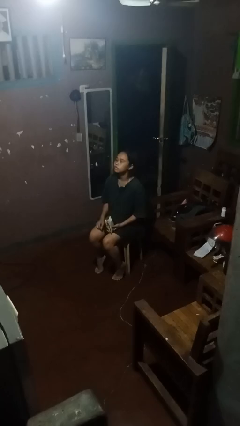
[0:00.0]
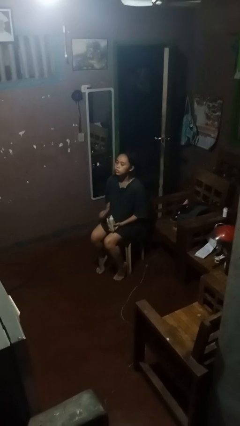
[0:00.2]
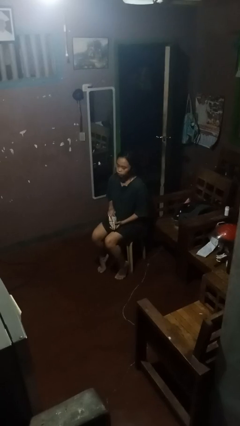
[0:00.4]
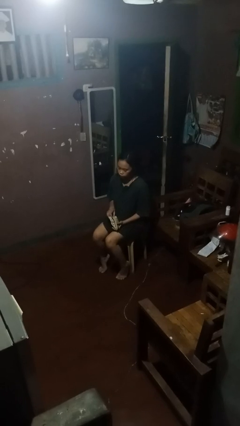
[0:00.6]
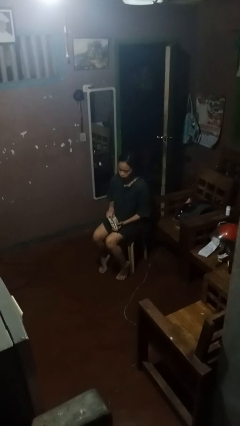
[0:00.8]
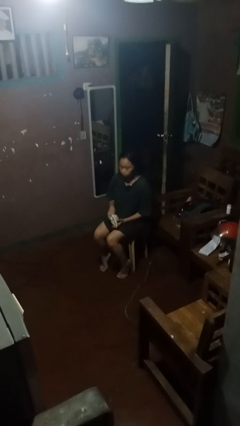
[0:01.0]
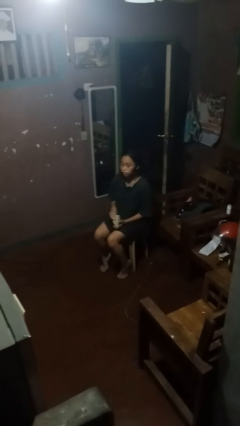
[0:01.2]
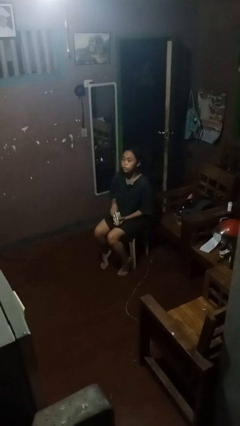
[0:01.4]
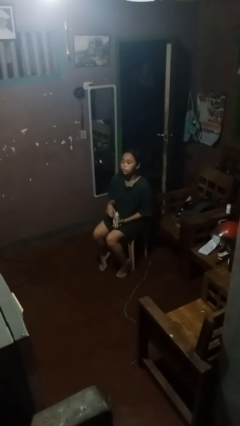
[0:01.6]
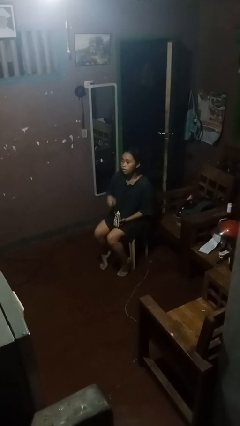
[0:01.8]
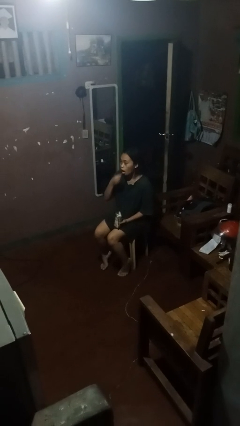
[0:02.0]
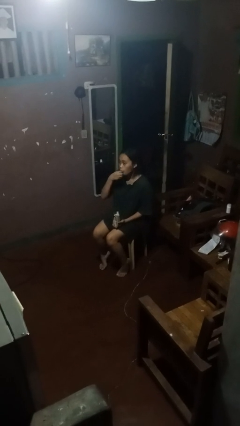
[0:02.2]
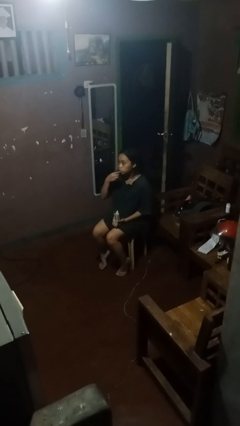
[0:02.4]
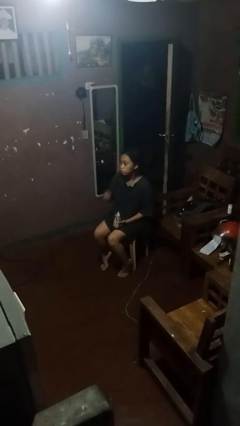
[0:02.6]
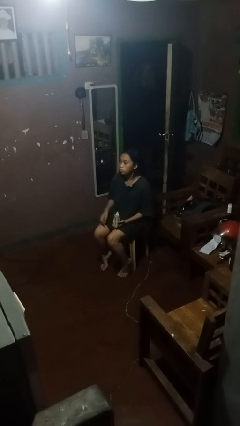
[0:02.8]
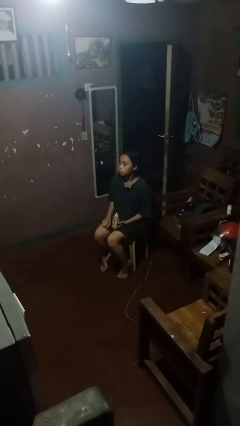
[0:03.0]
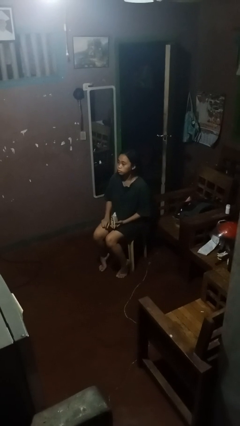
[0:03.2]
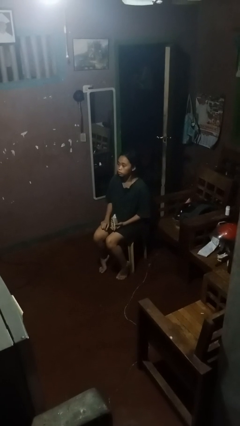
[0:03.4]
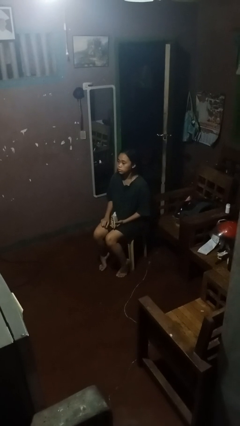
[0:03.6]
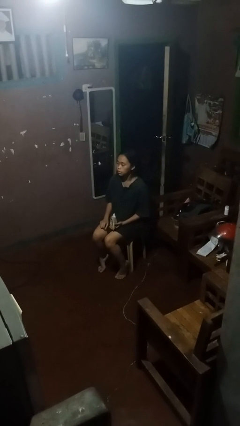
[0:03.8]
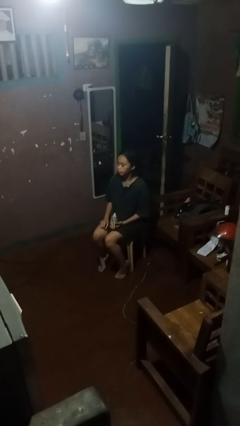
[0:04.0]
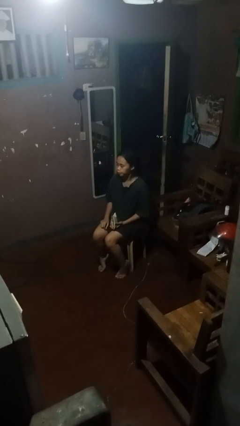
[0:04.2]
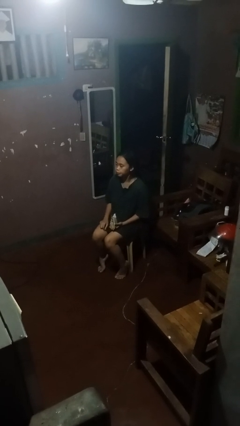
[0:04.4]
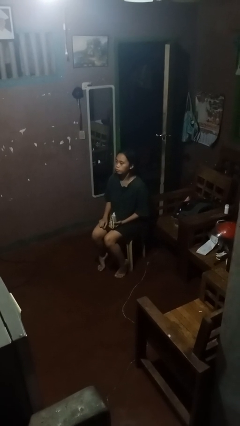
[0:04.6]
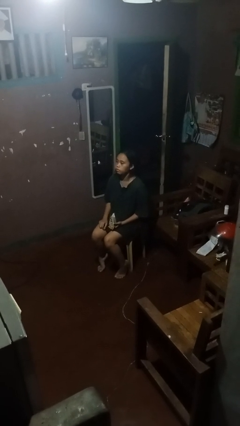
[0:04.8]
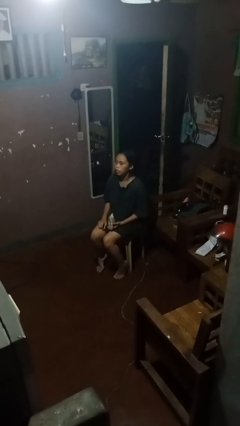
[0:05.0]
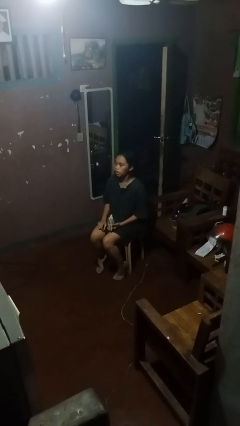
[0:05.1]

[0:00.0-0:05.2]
person eats snack from bag

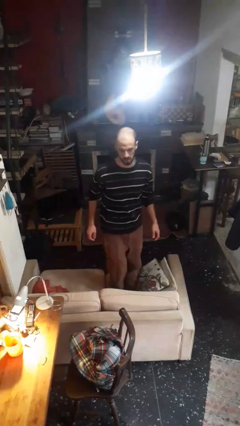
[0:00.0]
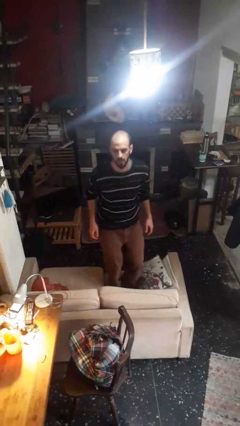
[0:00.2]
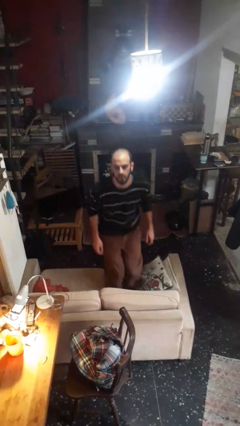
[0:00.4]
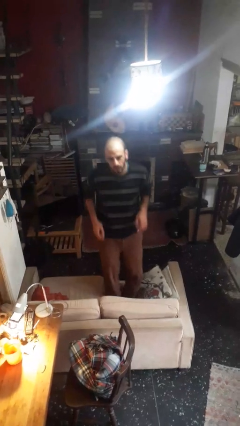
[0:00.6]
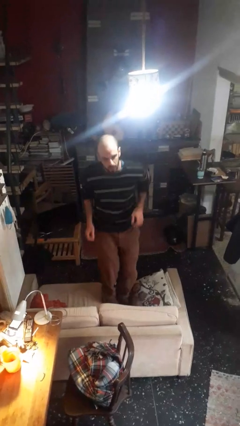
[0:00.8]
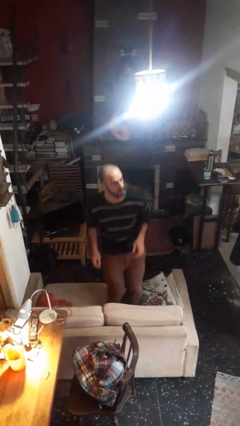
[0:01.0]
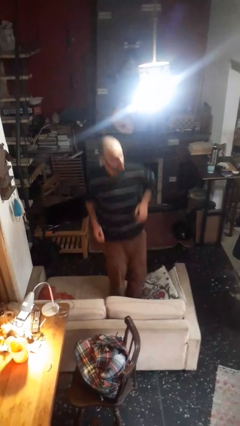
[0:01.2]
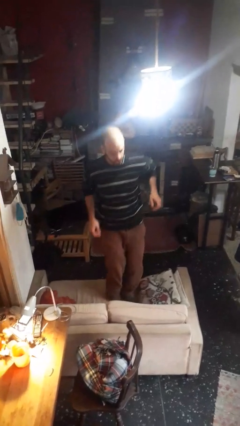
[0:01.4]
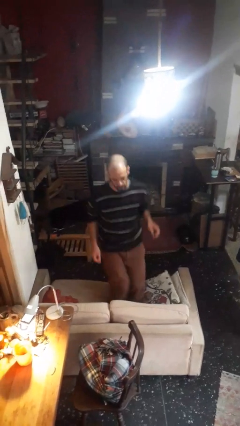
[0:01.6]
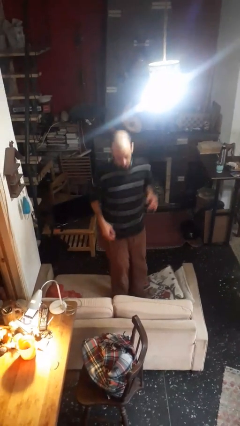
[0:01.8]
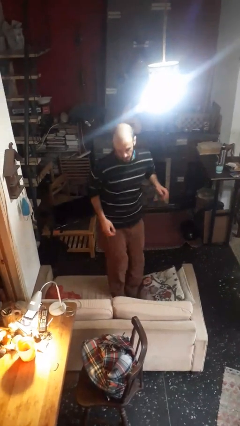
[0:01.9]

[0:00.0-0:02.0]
person jumps on couch

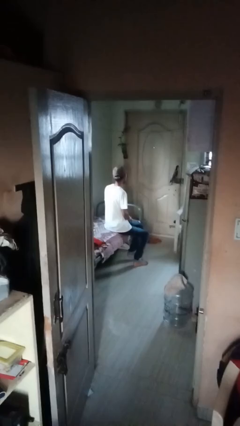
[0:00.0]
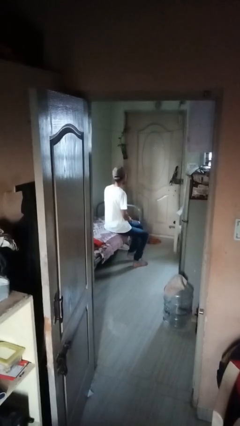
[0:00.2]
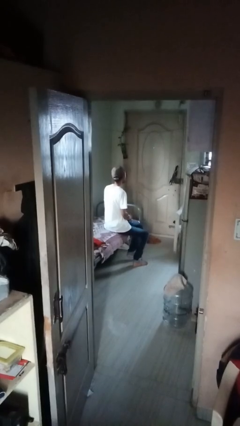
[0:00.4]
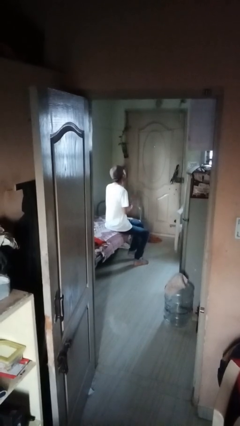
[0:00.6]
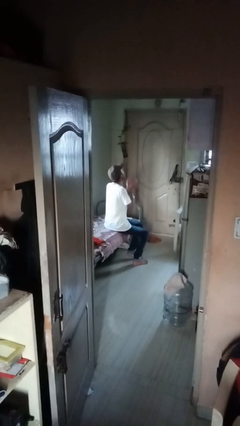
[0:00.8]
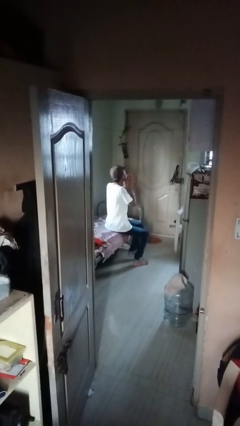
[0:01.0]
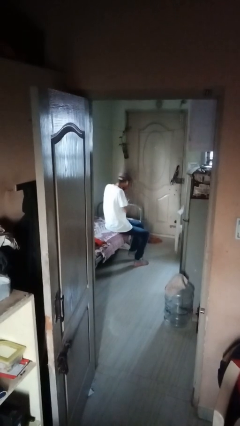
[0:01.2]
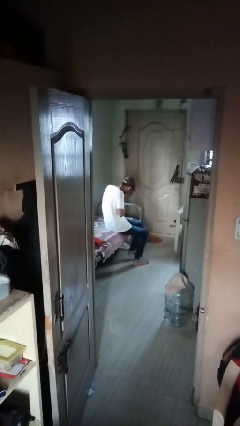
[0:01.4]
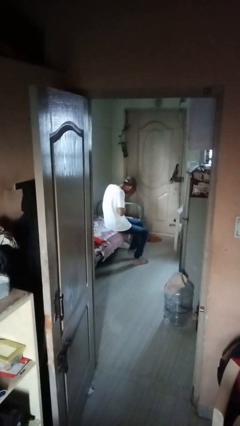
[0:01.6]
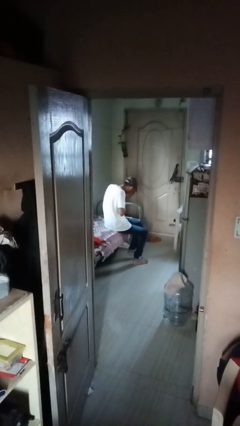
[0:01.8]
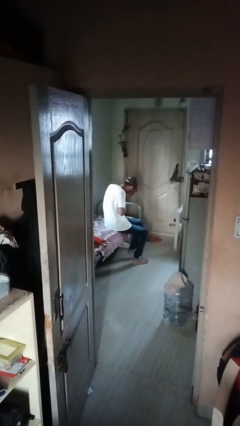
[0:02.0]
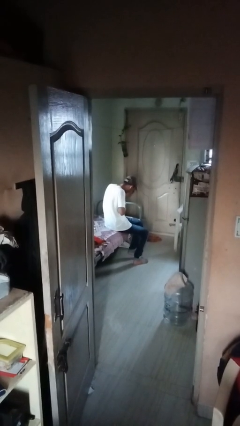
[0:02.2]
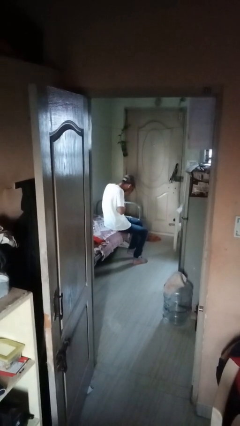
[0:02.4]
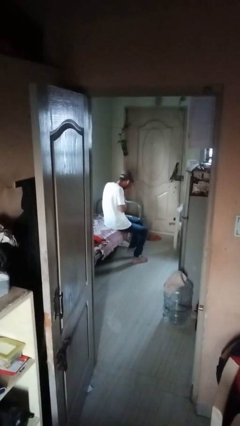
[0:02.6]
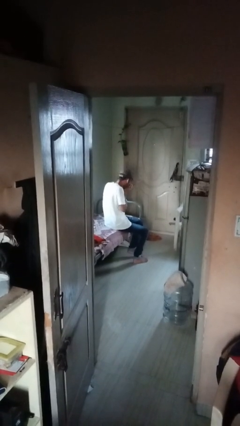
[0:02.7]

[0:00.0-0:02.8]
person sneezes into hand

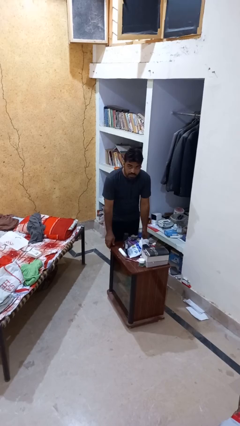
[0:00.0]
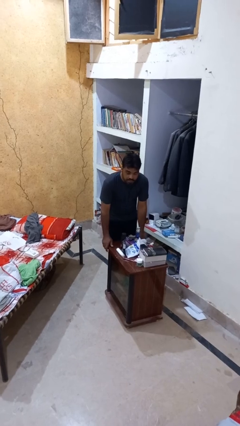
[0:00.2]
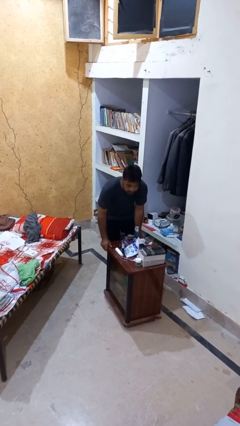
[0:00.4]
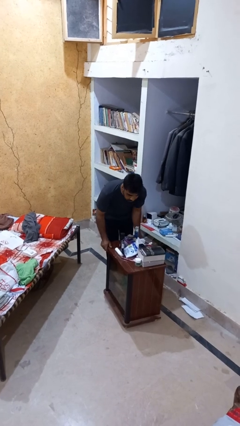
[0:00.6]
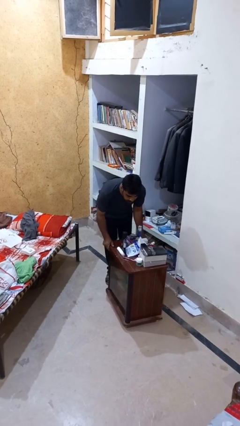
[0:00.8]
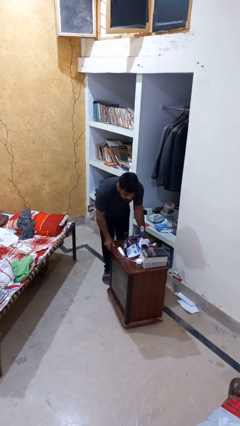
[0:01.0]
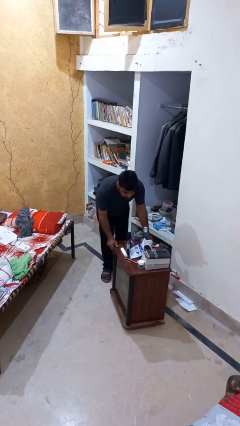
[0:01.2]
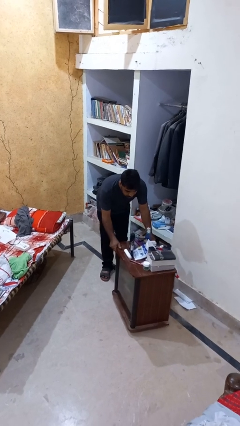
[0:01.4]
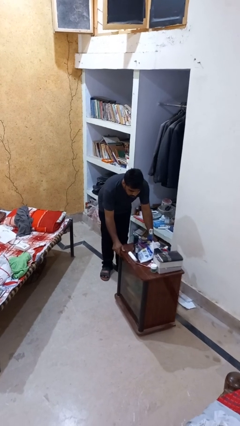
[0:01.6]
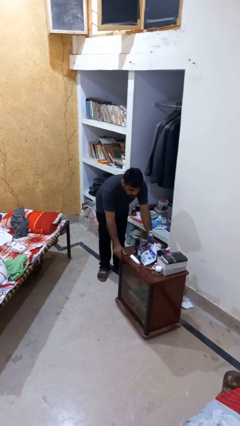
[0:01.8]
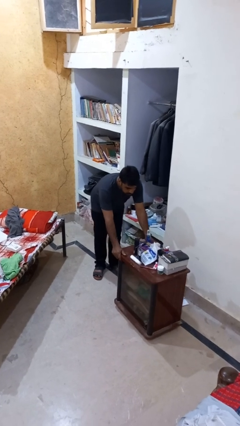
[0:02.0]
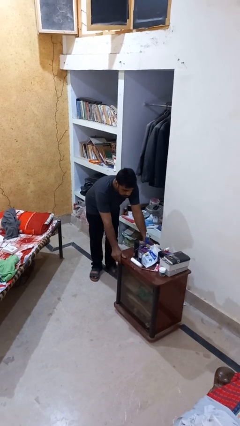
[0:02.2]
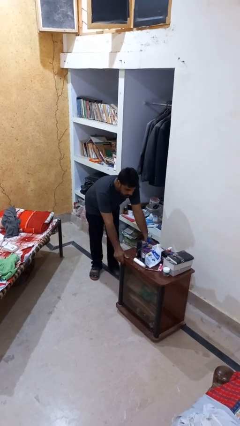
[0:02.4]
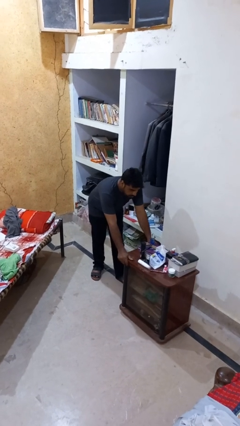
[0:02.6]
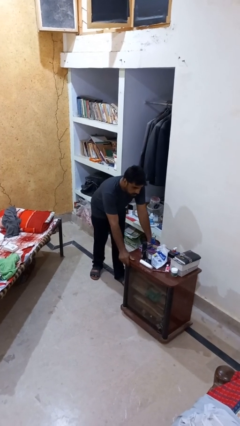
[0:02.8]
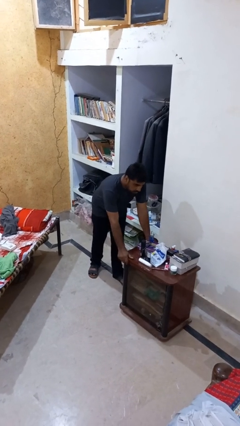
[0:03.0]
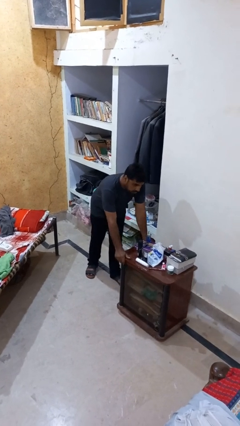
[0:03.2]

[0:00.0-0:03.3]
person pushes wheeled cart

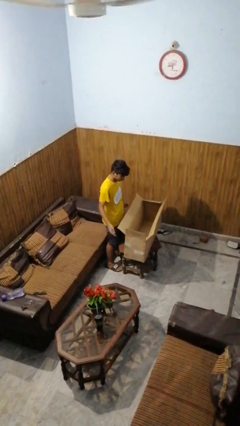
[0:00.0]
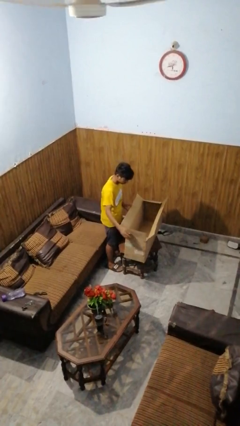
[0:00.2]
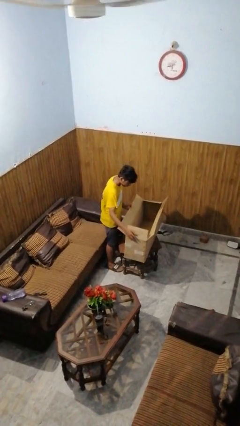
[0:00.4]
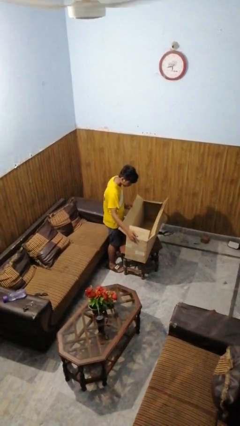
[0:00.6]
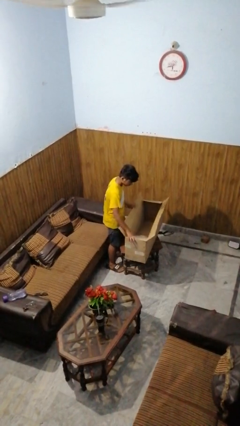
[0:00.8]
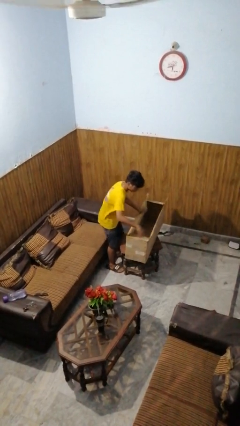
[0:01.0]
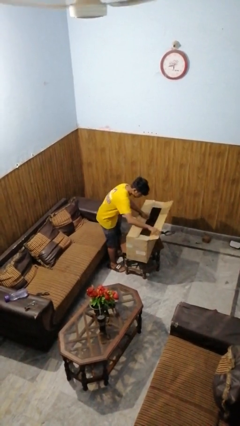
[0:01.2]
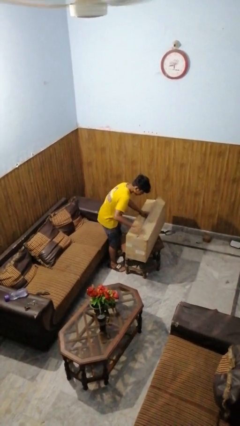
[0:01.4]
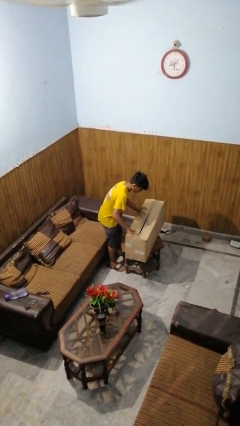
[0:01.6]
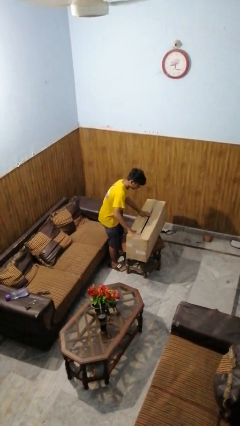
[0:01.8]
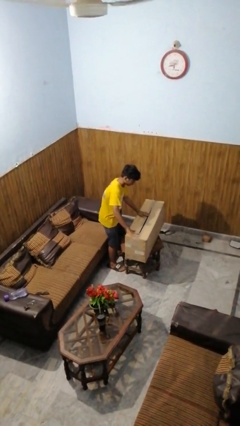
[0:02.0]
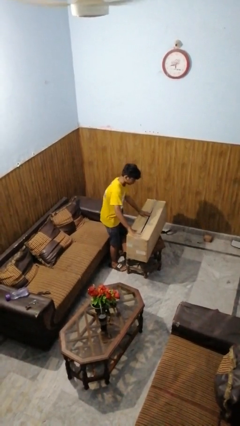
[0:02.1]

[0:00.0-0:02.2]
person closes box

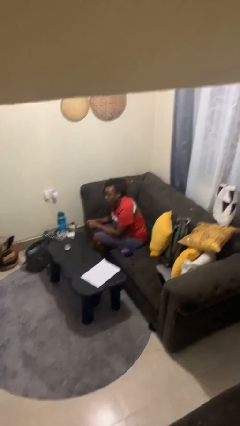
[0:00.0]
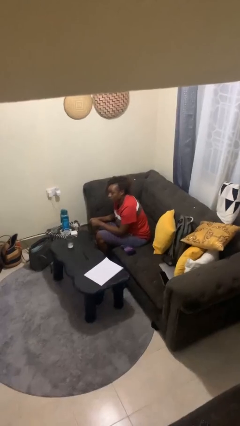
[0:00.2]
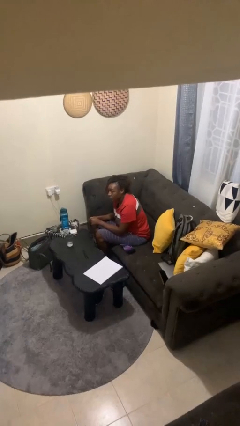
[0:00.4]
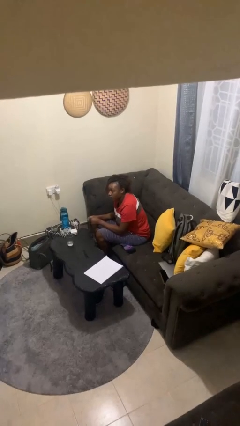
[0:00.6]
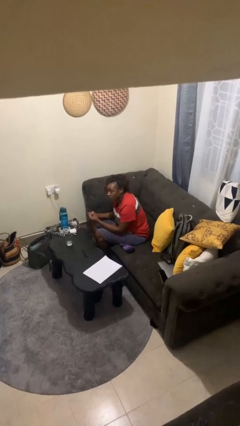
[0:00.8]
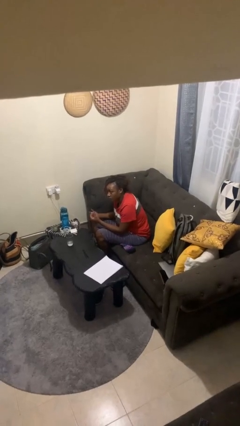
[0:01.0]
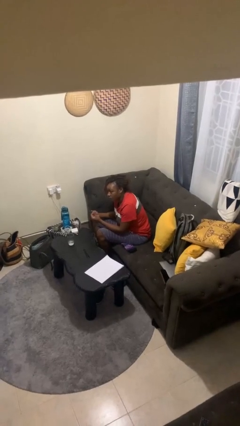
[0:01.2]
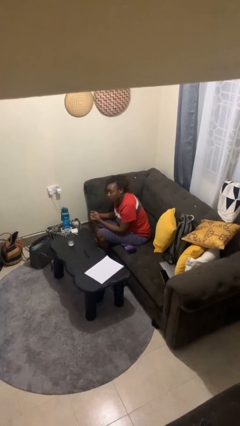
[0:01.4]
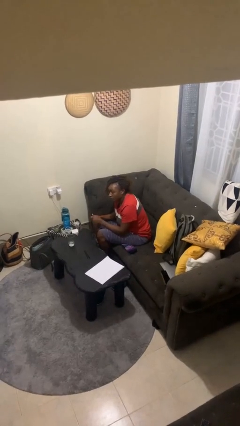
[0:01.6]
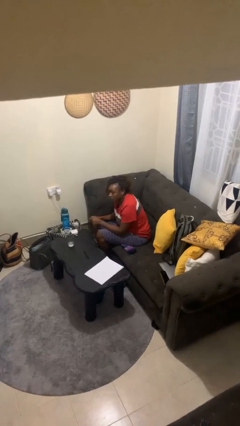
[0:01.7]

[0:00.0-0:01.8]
person snaps fingers
